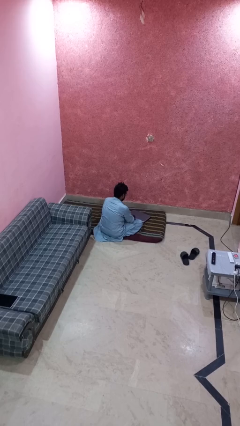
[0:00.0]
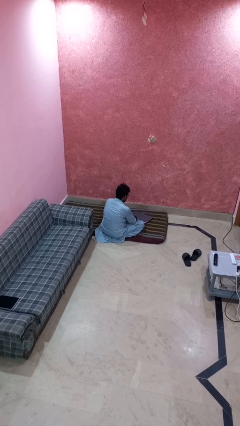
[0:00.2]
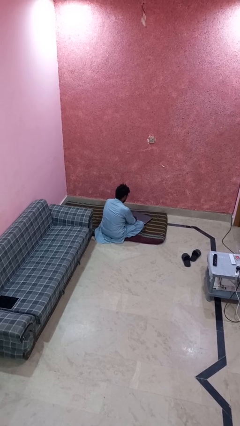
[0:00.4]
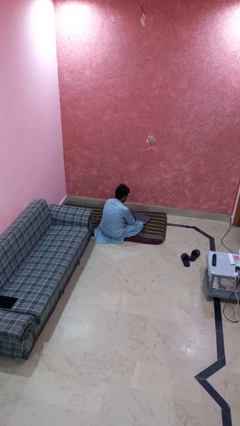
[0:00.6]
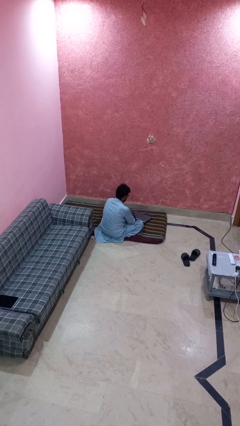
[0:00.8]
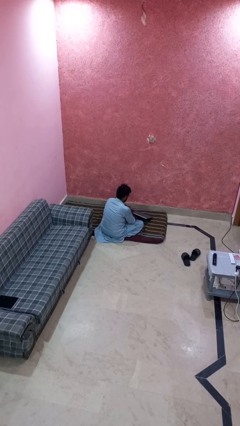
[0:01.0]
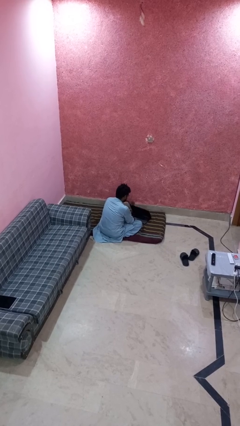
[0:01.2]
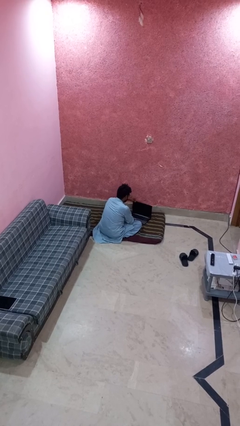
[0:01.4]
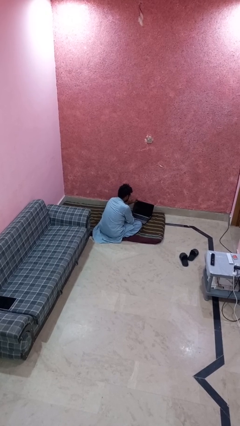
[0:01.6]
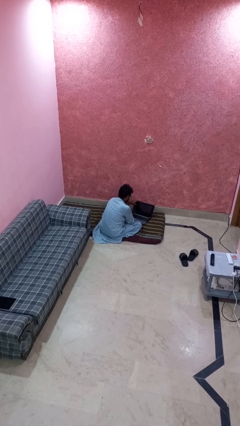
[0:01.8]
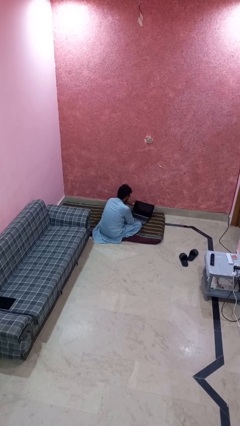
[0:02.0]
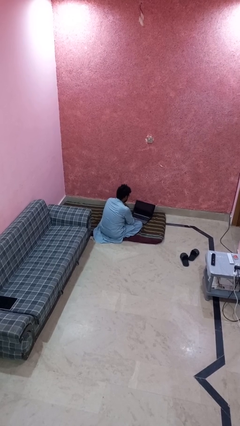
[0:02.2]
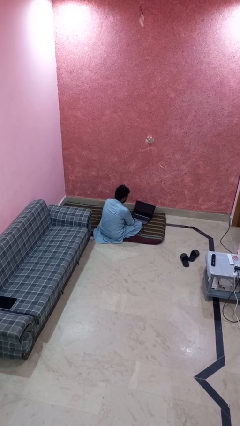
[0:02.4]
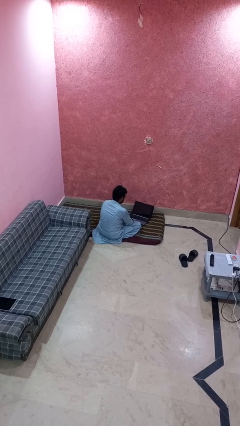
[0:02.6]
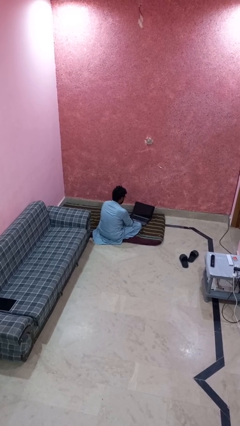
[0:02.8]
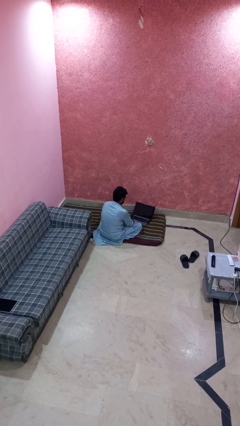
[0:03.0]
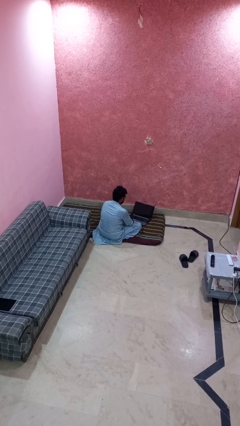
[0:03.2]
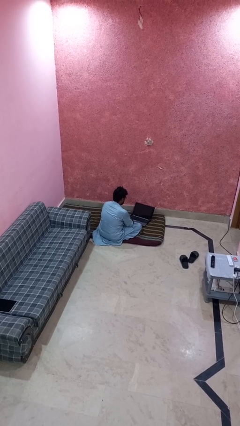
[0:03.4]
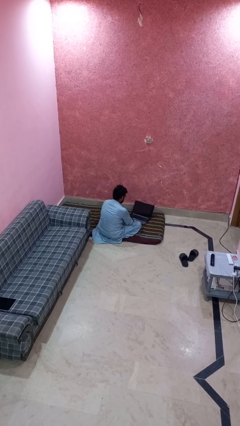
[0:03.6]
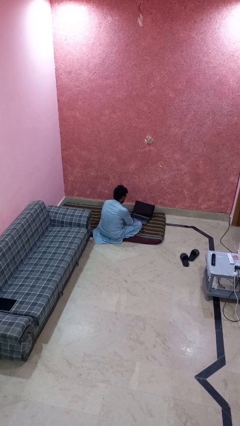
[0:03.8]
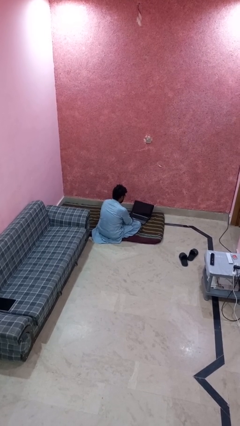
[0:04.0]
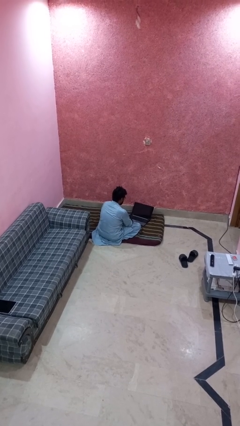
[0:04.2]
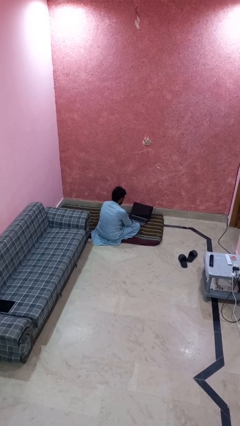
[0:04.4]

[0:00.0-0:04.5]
person opens laptop

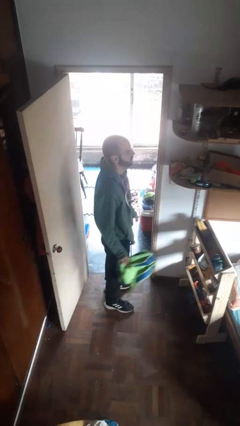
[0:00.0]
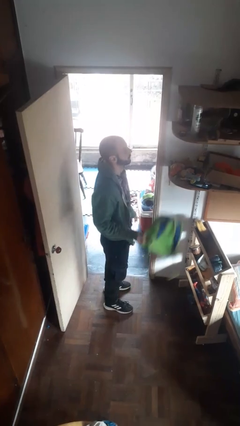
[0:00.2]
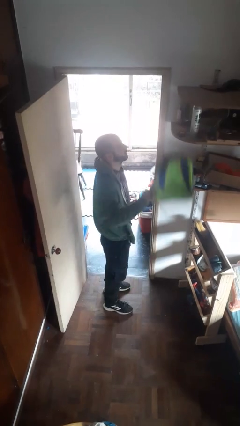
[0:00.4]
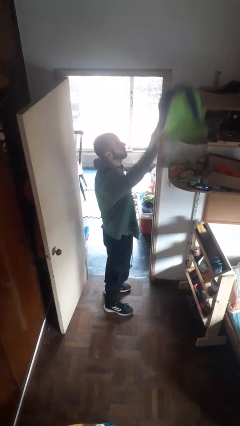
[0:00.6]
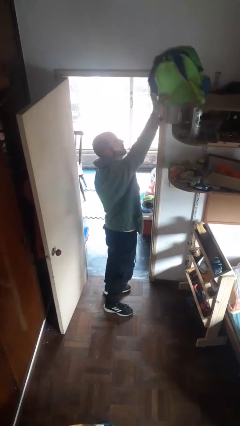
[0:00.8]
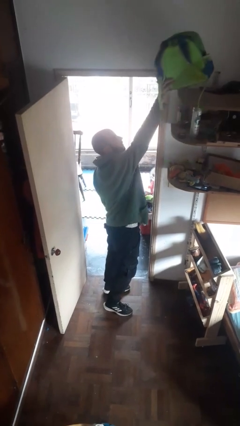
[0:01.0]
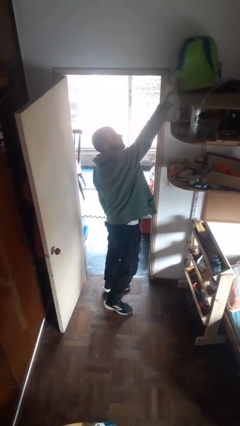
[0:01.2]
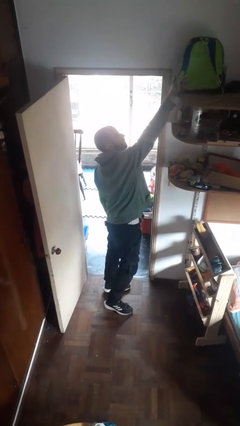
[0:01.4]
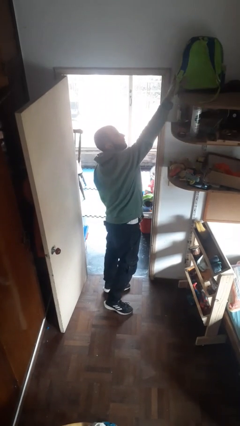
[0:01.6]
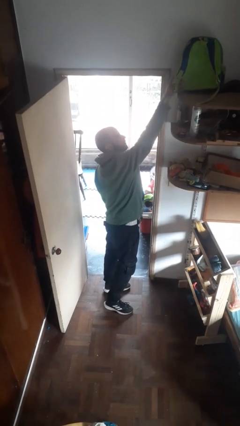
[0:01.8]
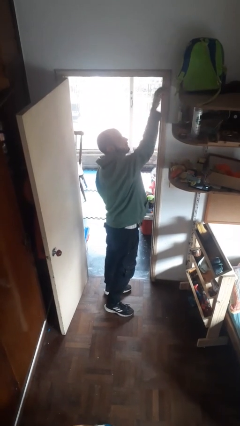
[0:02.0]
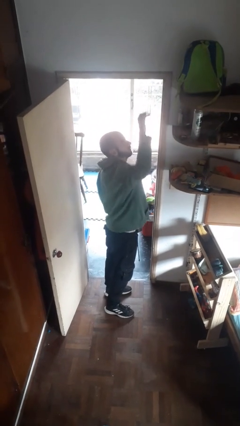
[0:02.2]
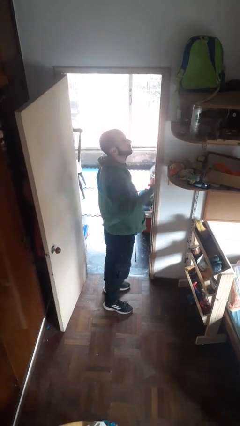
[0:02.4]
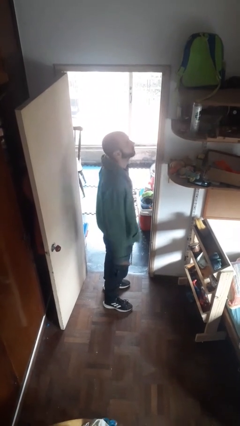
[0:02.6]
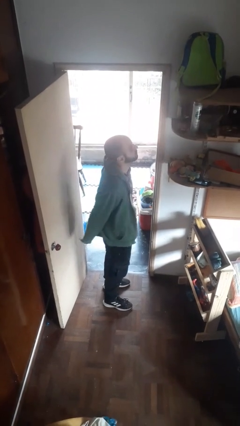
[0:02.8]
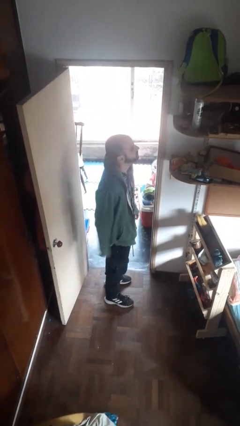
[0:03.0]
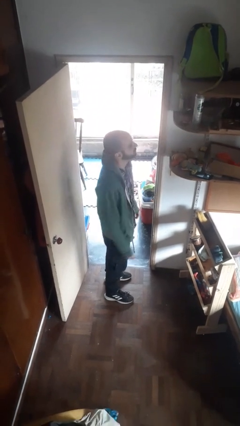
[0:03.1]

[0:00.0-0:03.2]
person picks up object from shelf

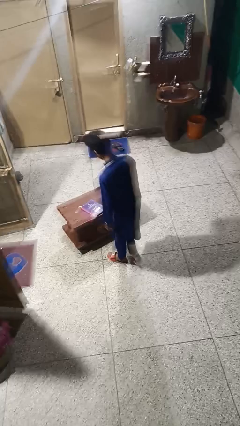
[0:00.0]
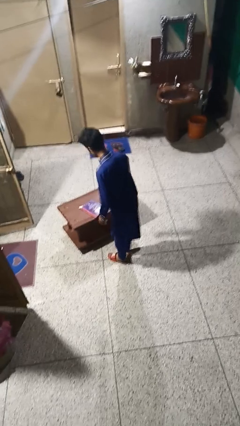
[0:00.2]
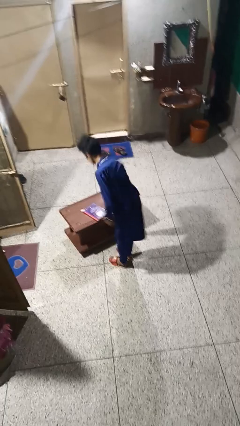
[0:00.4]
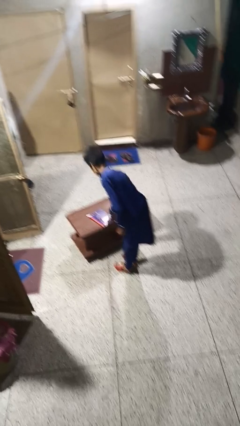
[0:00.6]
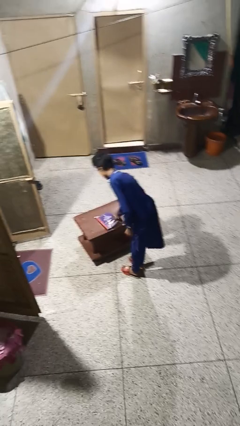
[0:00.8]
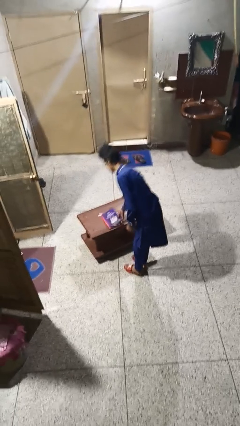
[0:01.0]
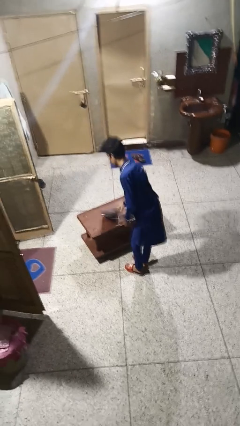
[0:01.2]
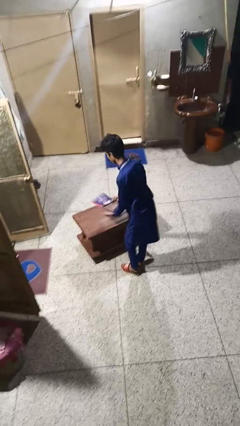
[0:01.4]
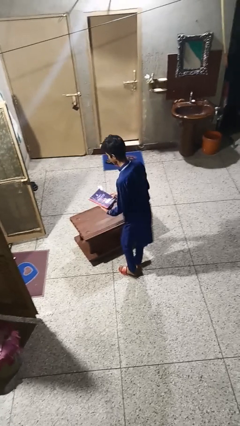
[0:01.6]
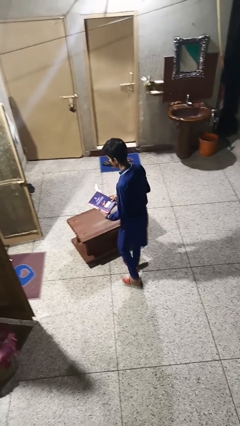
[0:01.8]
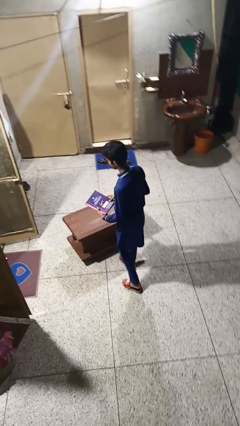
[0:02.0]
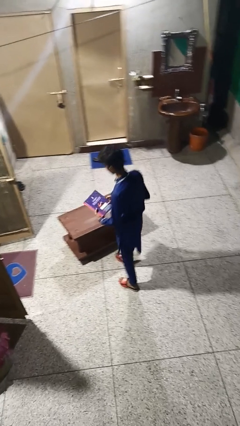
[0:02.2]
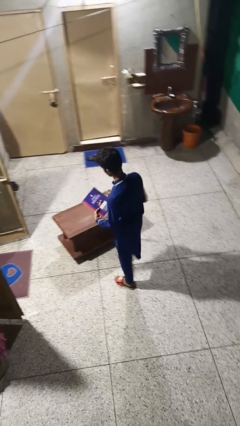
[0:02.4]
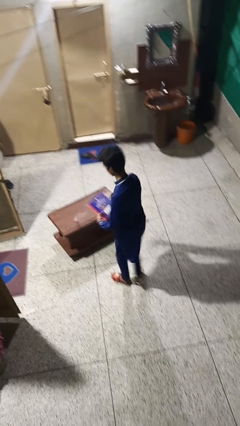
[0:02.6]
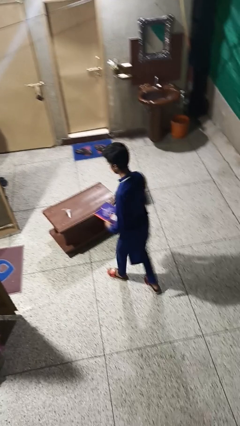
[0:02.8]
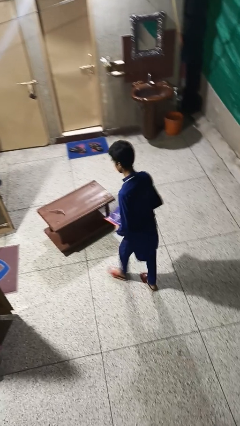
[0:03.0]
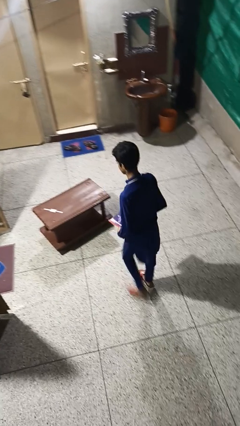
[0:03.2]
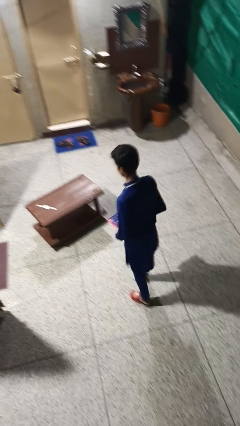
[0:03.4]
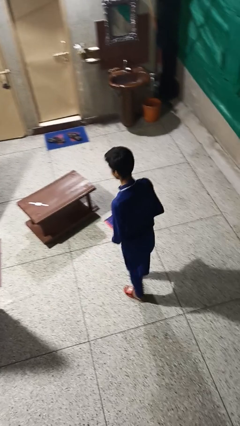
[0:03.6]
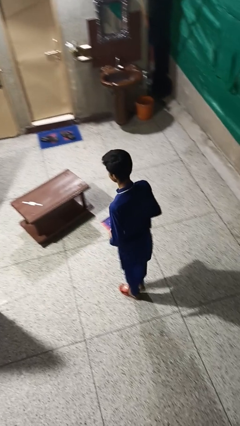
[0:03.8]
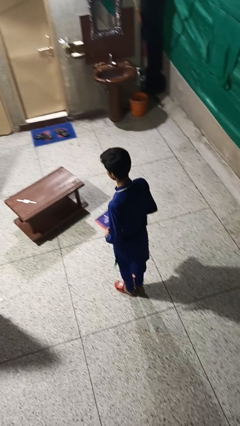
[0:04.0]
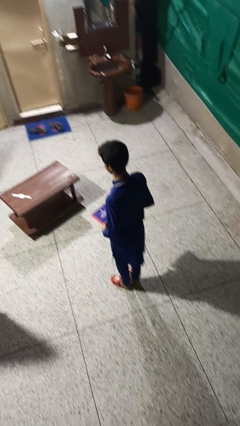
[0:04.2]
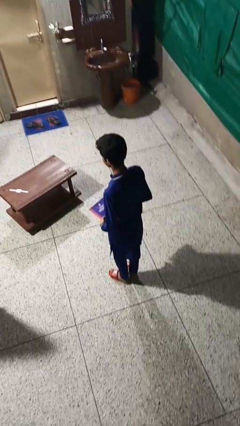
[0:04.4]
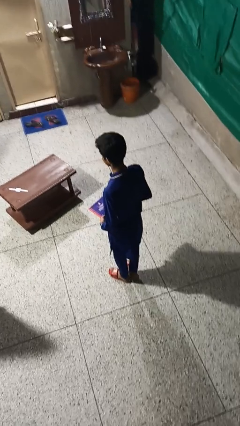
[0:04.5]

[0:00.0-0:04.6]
person picks up object from table

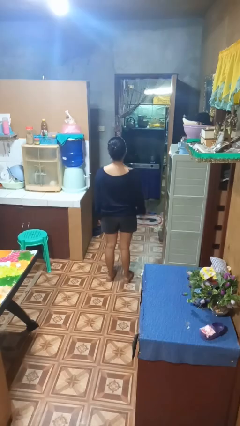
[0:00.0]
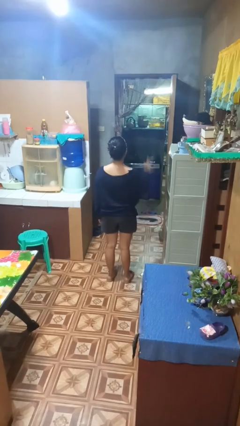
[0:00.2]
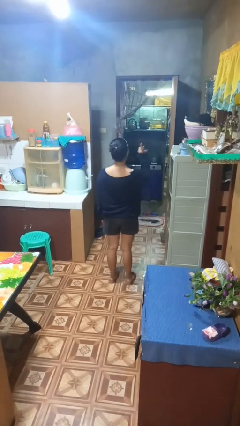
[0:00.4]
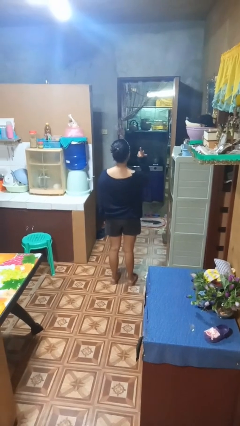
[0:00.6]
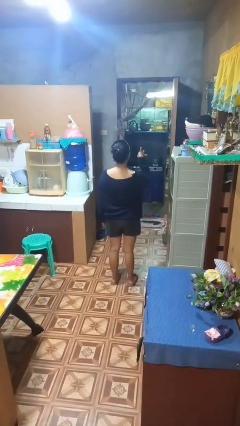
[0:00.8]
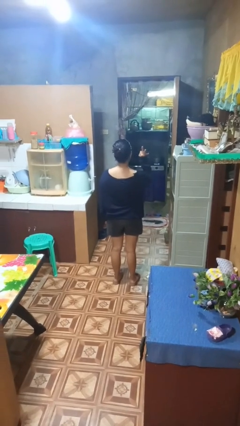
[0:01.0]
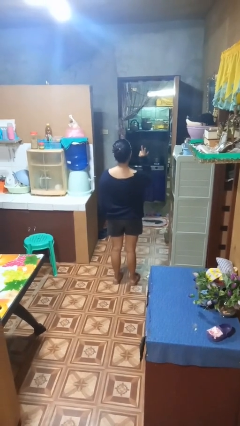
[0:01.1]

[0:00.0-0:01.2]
person gestures number three

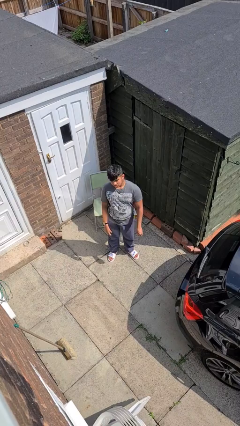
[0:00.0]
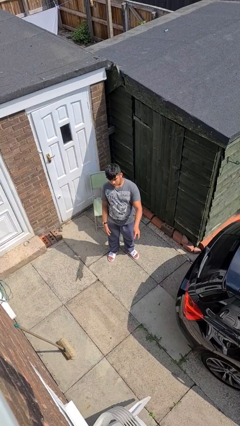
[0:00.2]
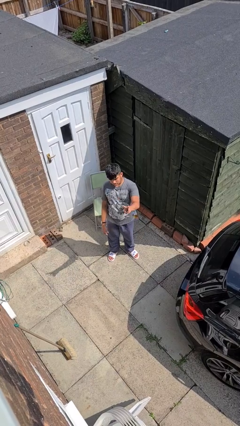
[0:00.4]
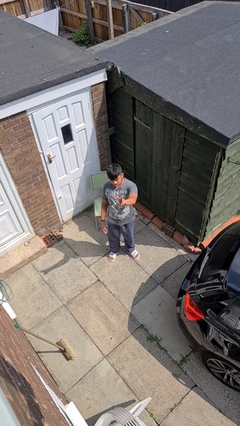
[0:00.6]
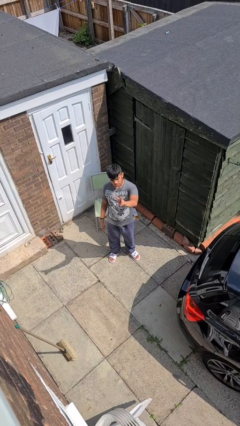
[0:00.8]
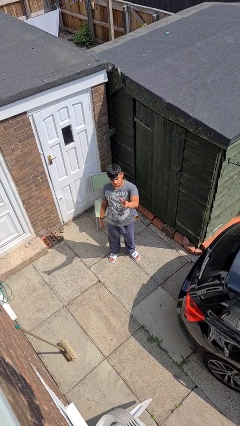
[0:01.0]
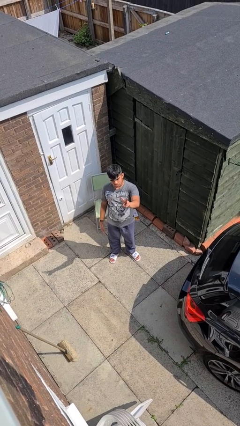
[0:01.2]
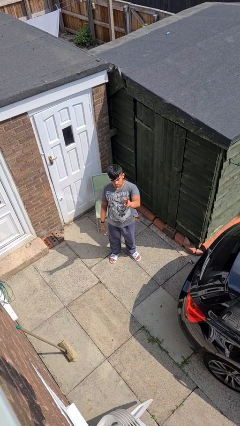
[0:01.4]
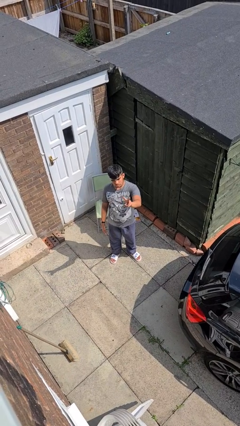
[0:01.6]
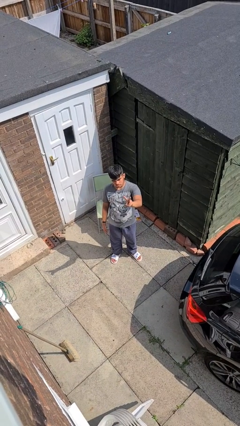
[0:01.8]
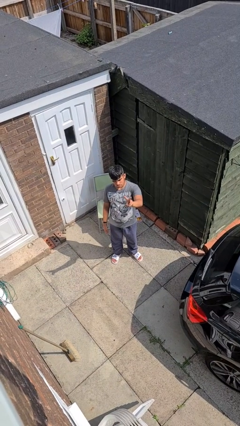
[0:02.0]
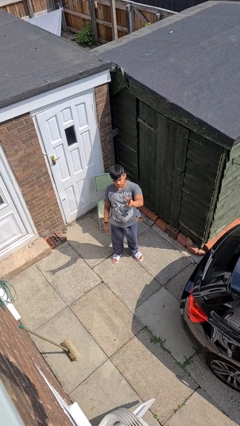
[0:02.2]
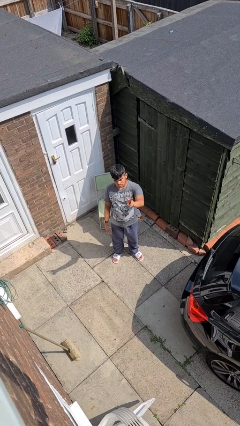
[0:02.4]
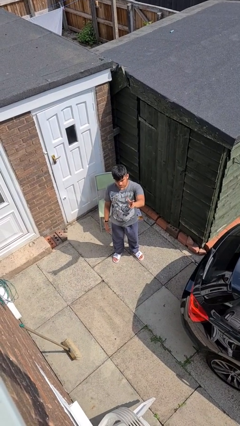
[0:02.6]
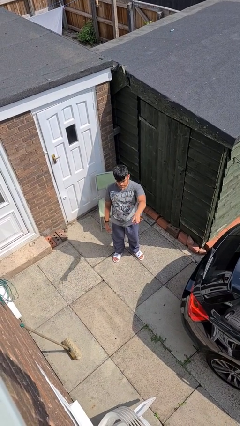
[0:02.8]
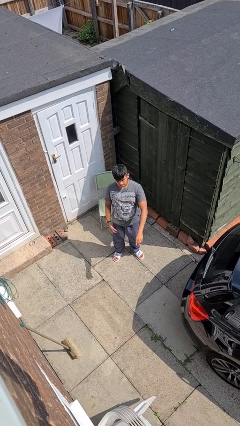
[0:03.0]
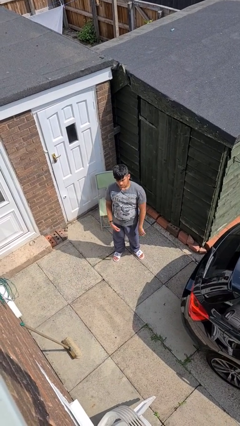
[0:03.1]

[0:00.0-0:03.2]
person gestures peace

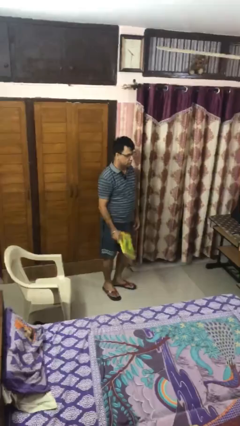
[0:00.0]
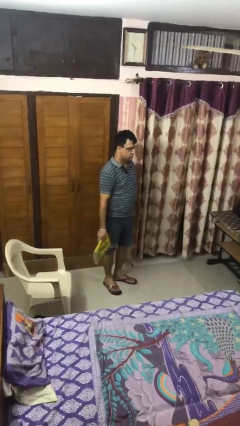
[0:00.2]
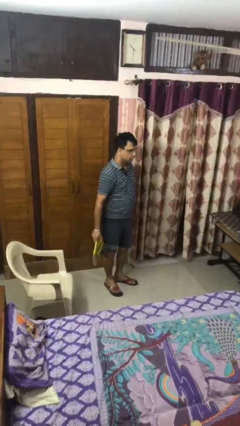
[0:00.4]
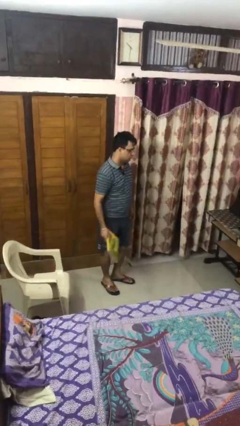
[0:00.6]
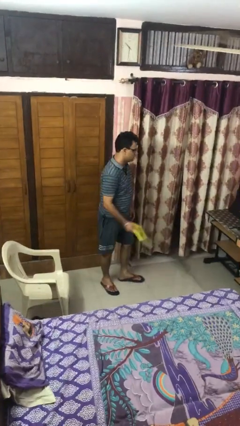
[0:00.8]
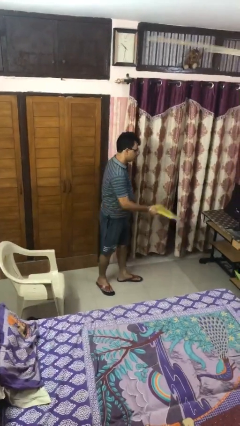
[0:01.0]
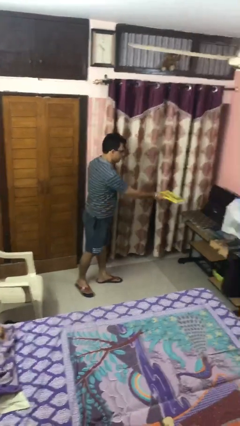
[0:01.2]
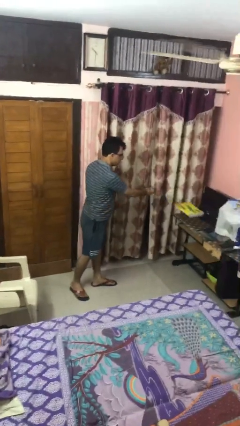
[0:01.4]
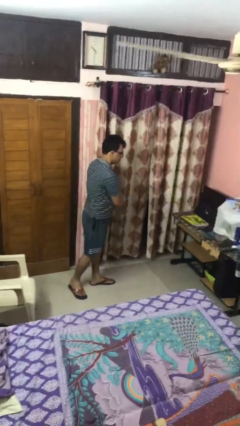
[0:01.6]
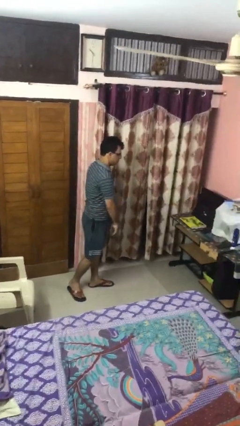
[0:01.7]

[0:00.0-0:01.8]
person throws object on table
